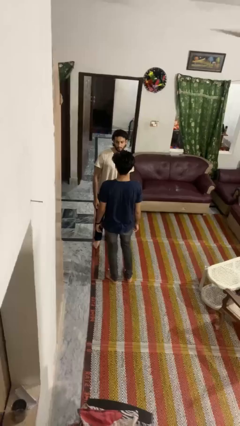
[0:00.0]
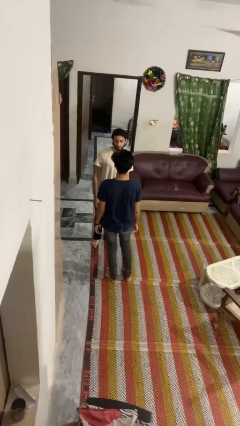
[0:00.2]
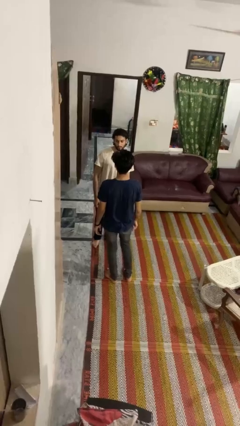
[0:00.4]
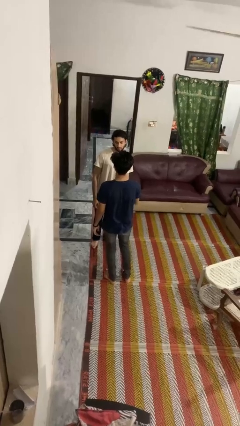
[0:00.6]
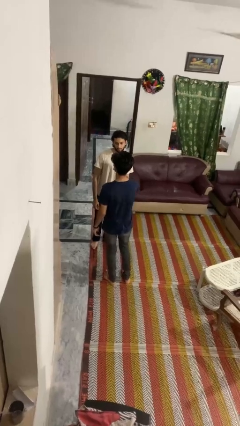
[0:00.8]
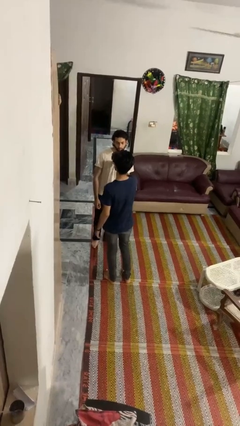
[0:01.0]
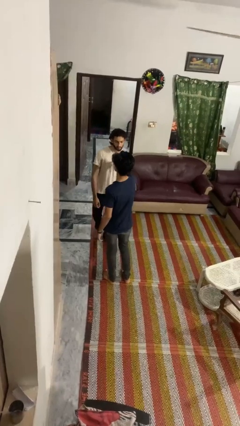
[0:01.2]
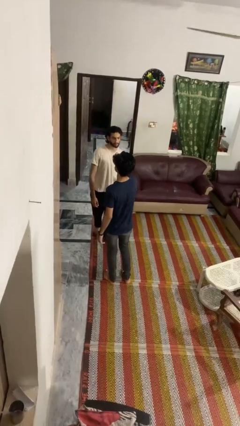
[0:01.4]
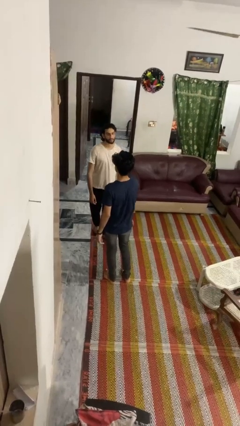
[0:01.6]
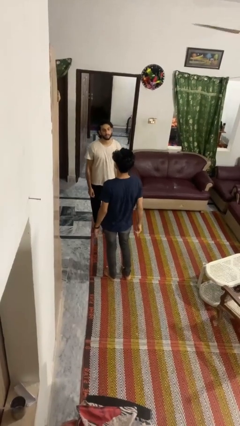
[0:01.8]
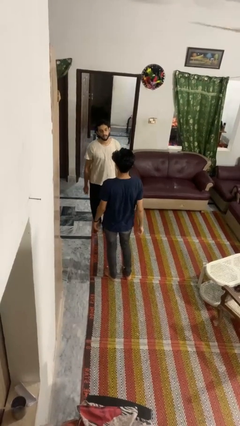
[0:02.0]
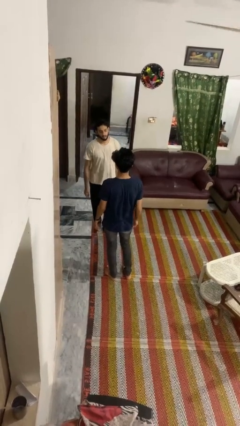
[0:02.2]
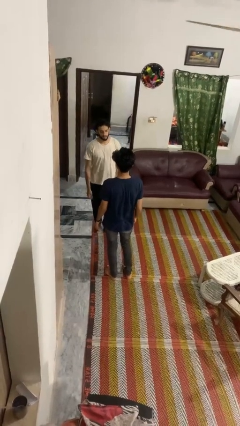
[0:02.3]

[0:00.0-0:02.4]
person shoves person

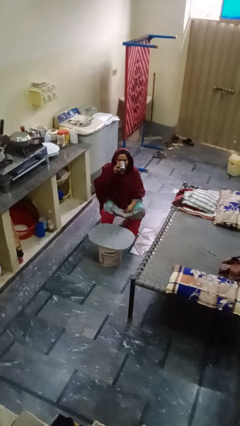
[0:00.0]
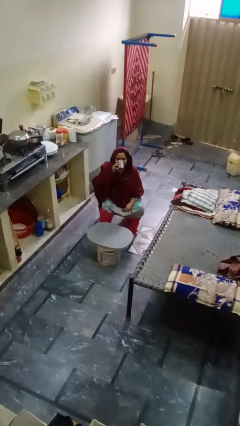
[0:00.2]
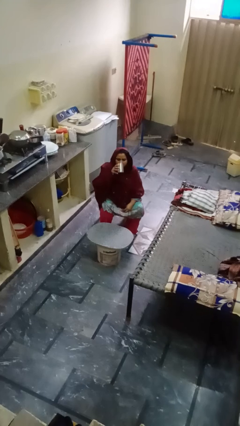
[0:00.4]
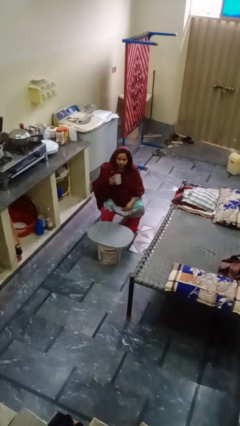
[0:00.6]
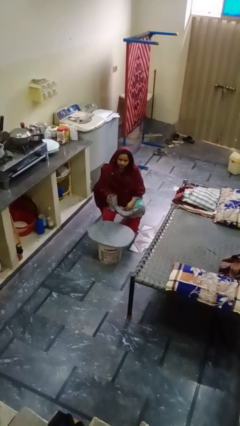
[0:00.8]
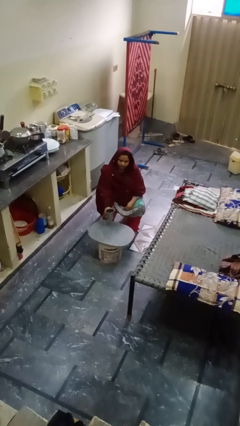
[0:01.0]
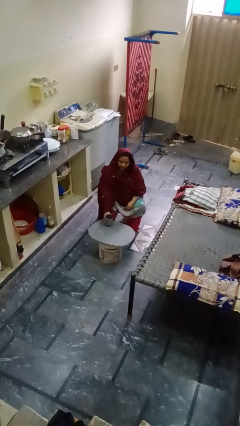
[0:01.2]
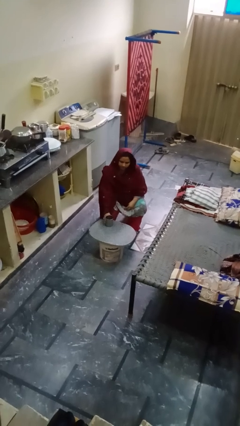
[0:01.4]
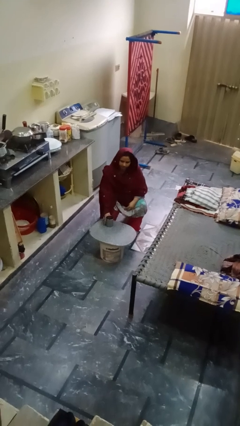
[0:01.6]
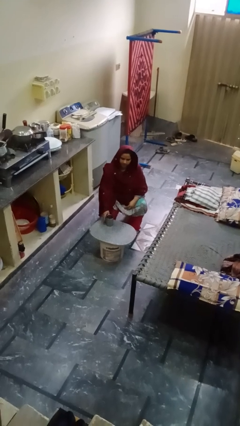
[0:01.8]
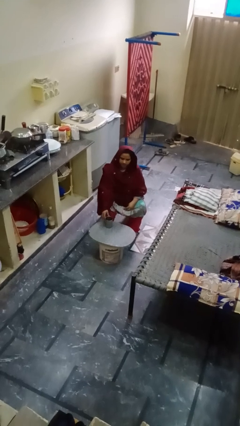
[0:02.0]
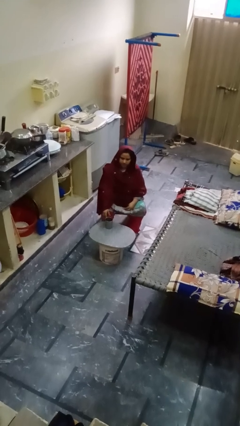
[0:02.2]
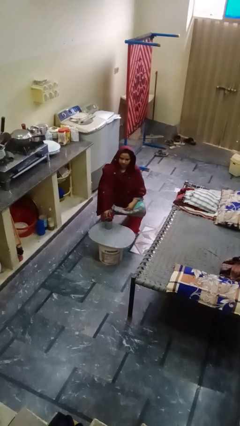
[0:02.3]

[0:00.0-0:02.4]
person puts down object on table

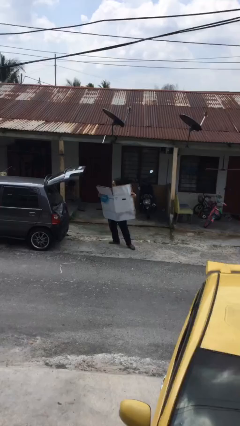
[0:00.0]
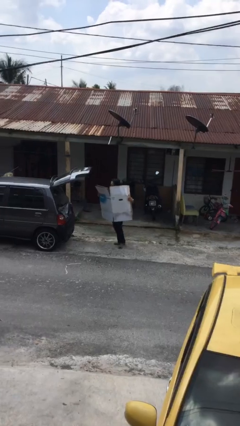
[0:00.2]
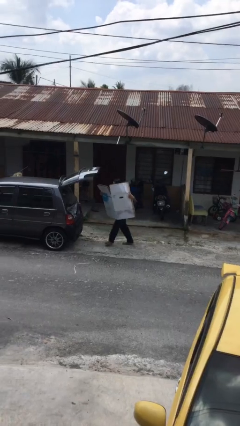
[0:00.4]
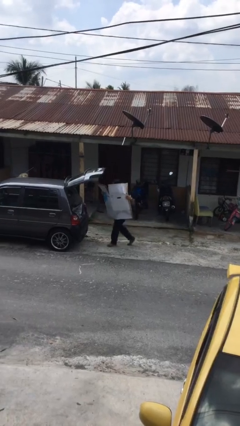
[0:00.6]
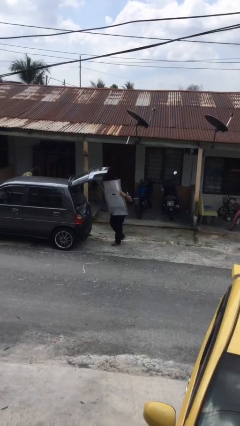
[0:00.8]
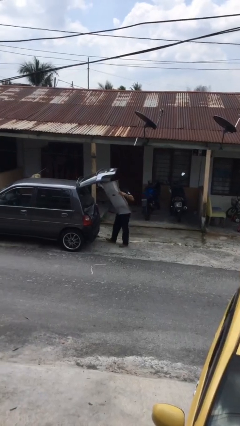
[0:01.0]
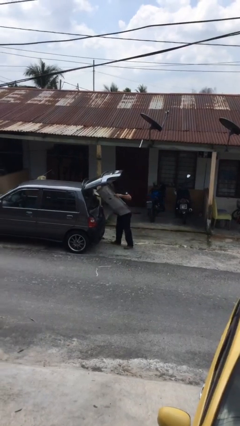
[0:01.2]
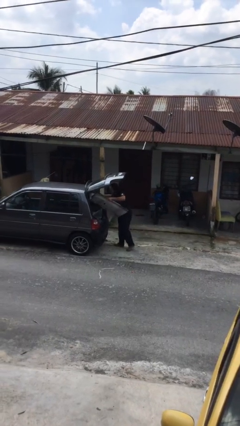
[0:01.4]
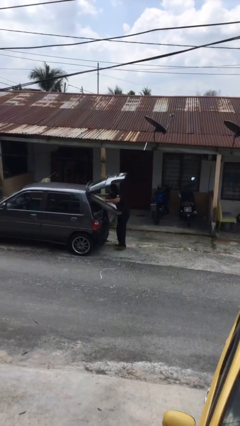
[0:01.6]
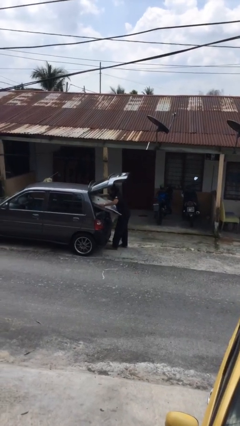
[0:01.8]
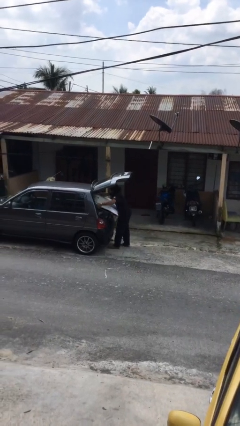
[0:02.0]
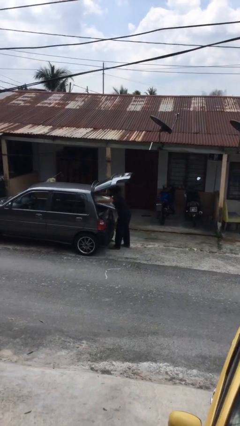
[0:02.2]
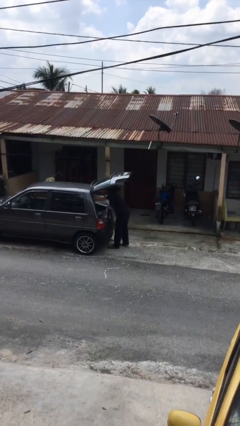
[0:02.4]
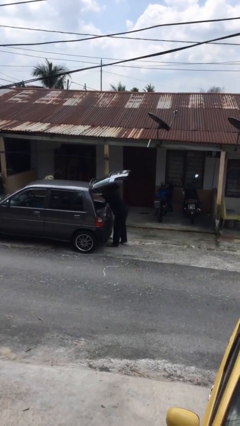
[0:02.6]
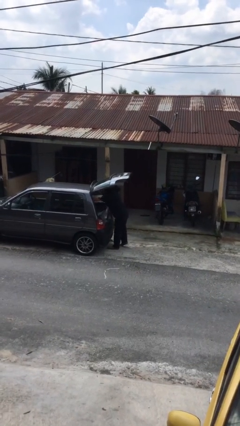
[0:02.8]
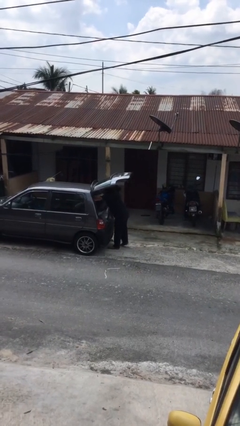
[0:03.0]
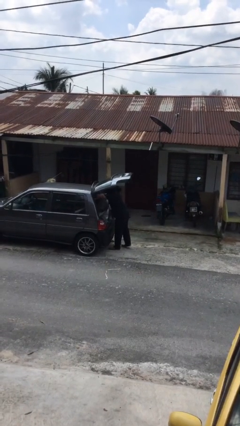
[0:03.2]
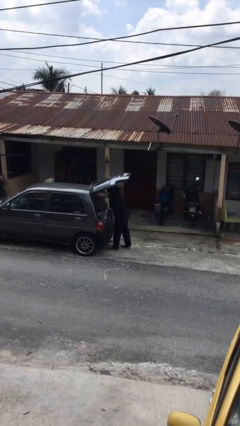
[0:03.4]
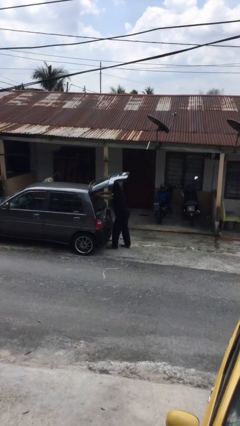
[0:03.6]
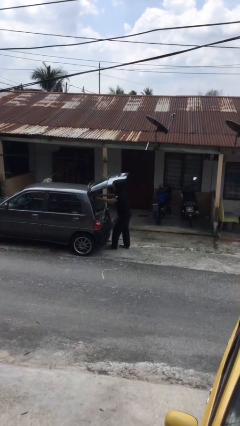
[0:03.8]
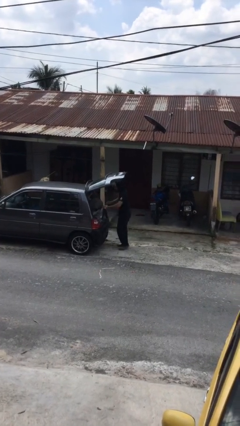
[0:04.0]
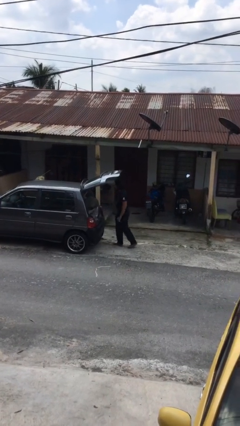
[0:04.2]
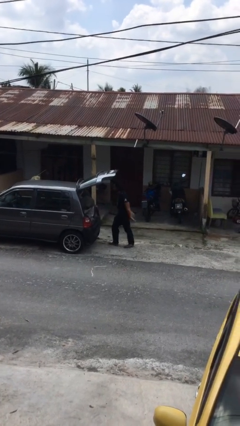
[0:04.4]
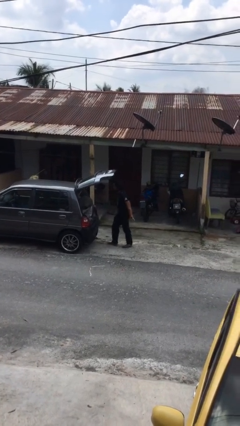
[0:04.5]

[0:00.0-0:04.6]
person loads car

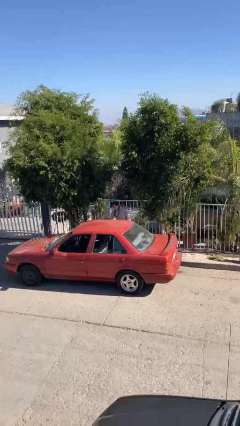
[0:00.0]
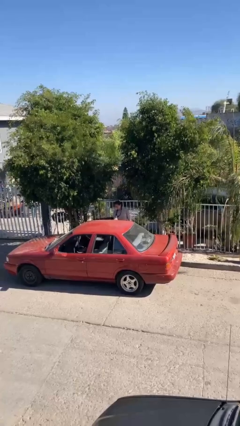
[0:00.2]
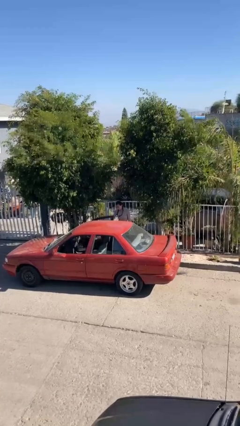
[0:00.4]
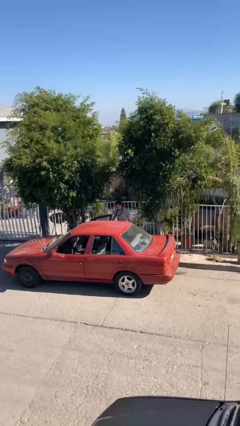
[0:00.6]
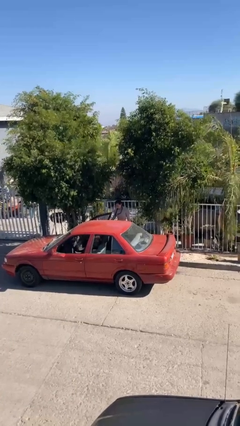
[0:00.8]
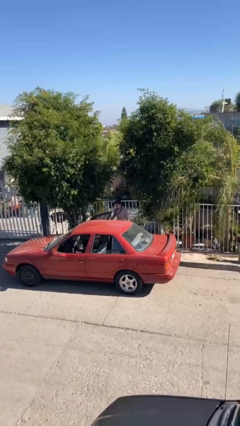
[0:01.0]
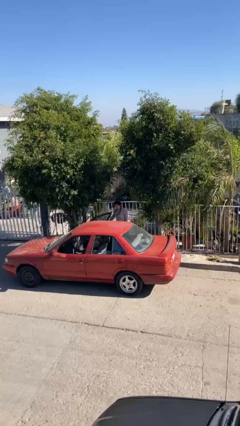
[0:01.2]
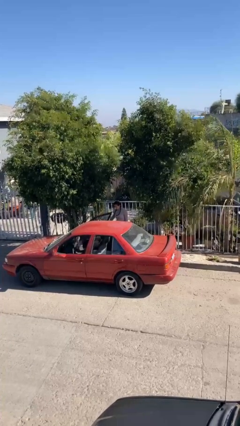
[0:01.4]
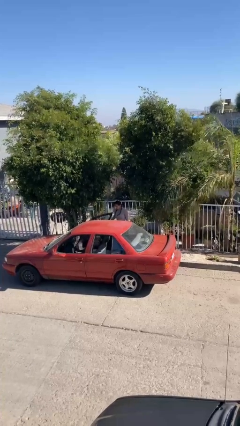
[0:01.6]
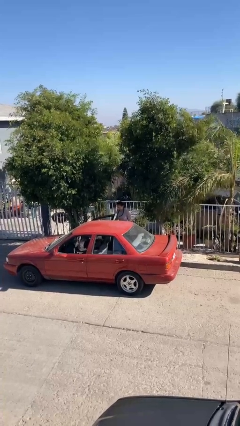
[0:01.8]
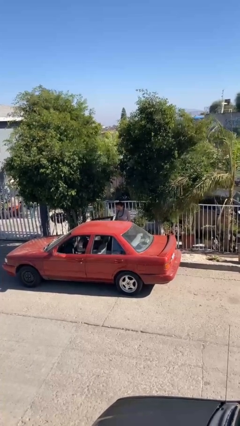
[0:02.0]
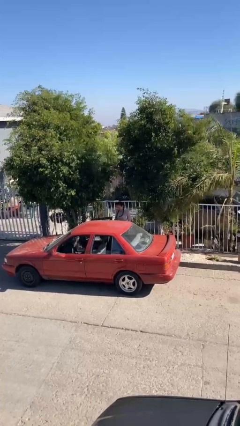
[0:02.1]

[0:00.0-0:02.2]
person opens car door

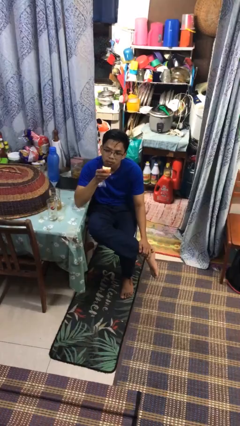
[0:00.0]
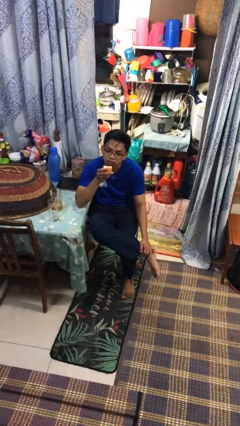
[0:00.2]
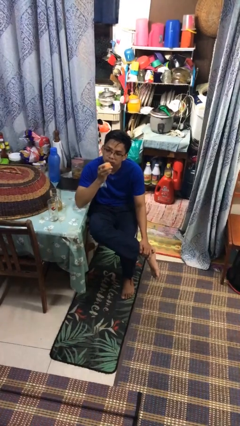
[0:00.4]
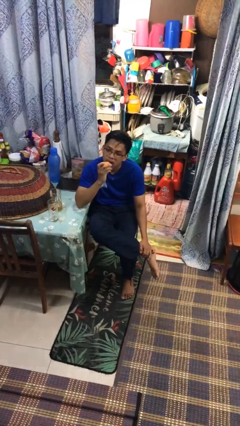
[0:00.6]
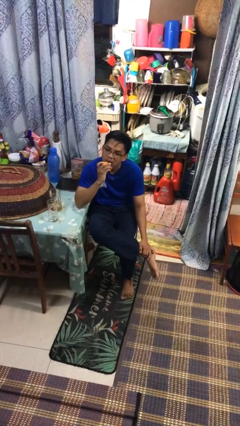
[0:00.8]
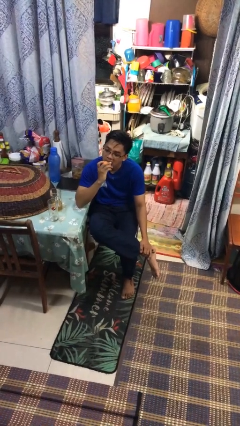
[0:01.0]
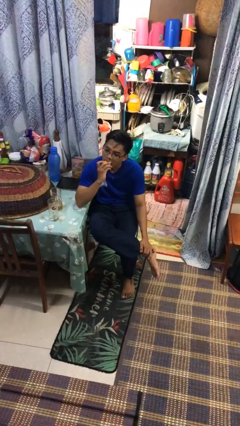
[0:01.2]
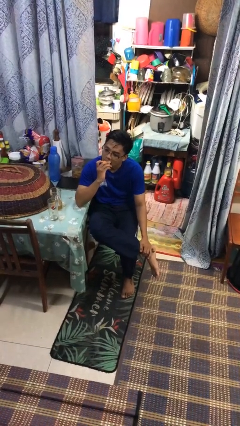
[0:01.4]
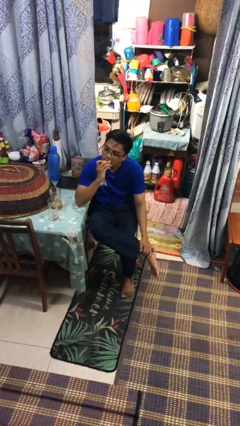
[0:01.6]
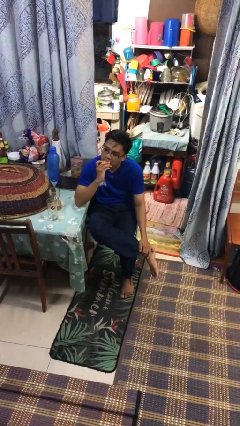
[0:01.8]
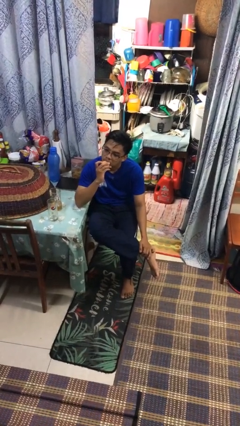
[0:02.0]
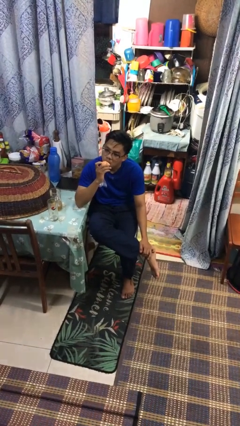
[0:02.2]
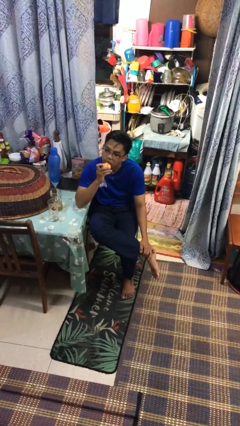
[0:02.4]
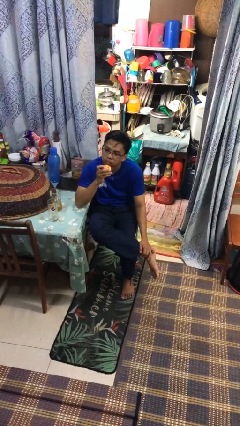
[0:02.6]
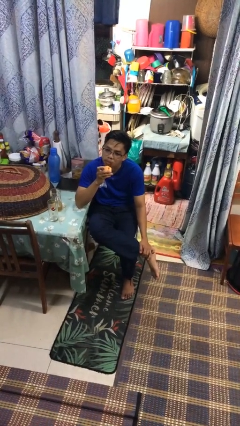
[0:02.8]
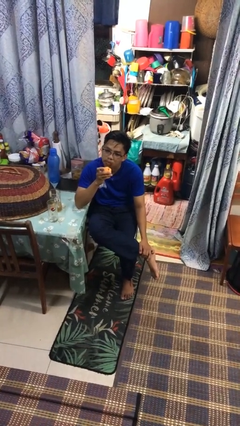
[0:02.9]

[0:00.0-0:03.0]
person eats apple

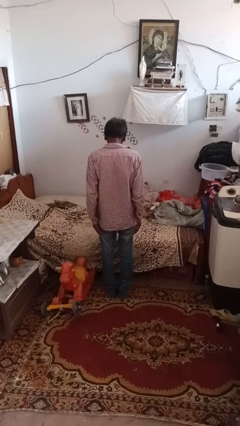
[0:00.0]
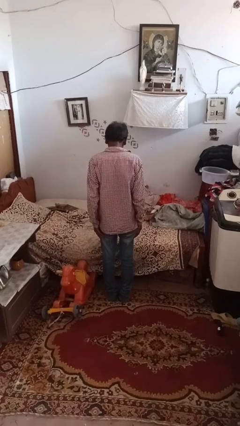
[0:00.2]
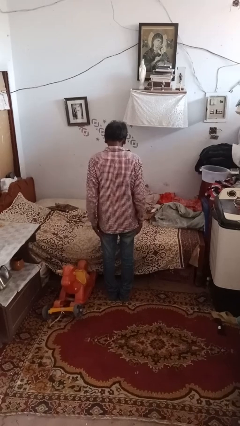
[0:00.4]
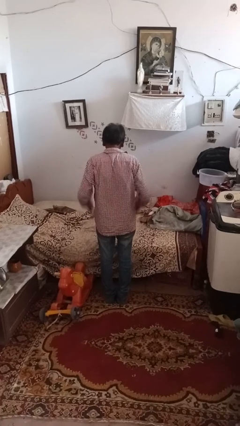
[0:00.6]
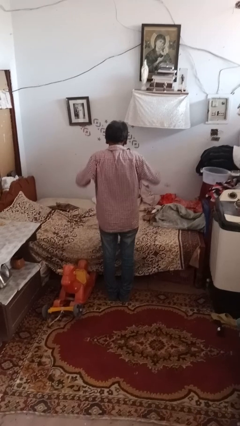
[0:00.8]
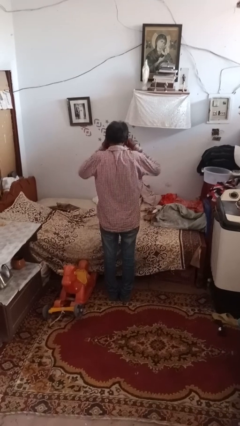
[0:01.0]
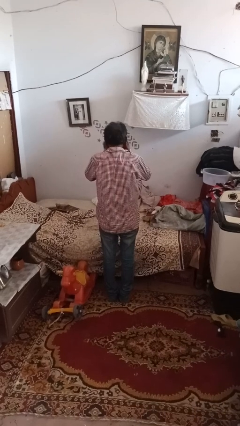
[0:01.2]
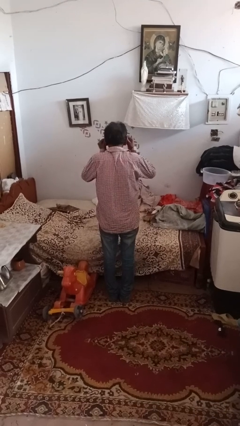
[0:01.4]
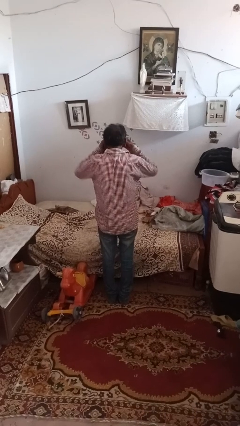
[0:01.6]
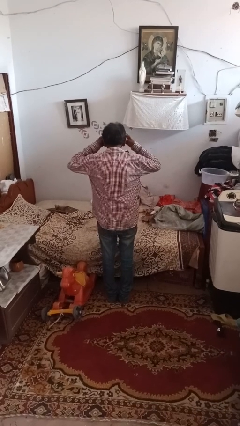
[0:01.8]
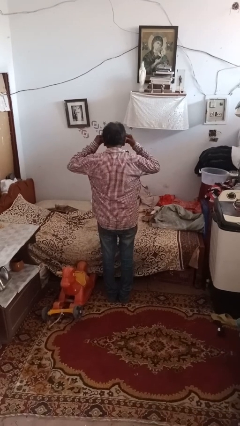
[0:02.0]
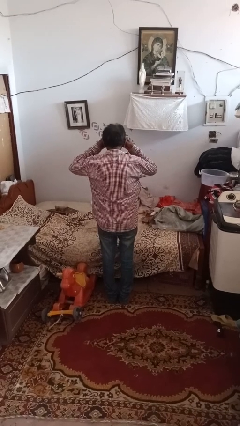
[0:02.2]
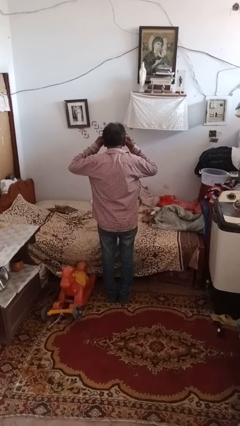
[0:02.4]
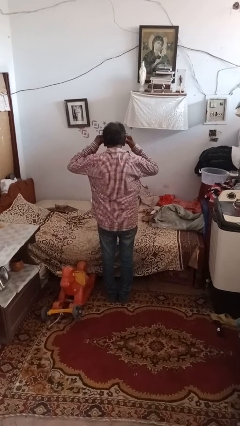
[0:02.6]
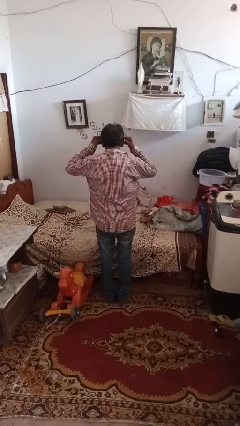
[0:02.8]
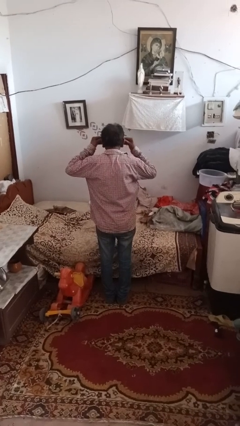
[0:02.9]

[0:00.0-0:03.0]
person rubs eyes

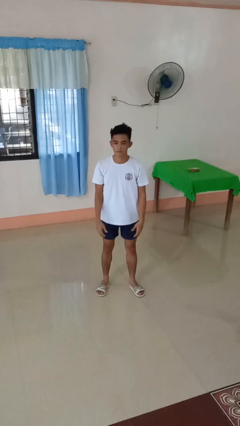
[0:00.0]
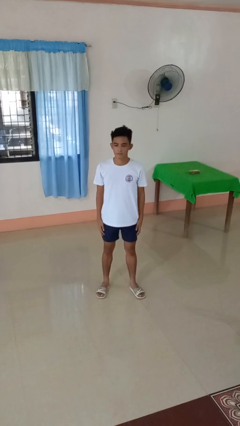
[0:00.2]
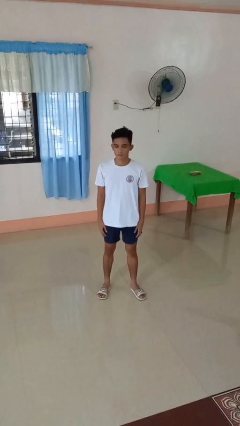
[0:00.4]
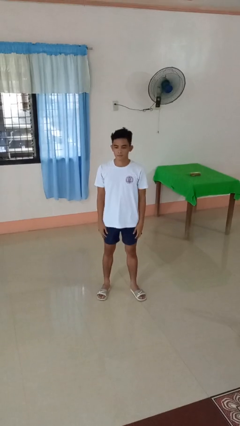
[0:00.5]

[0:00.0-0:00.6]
person stands up
